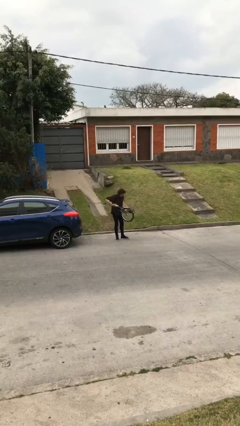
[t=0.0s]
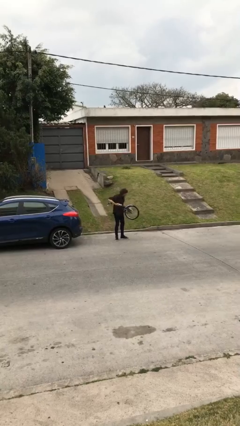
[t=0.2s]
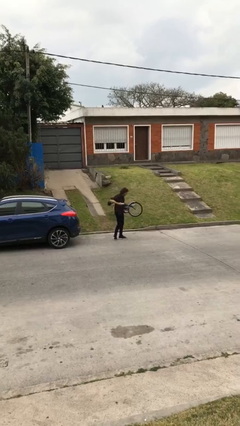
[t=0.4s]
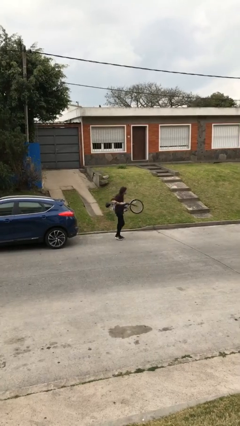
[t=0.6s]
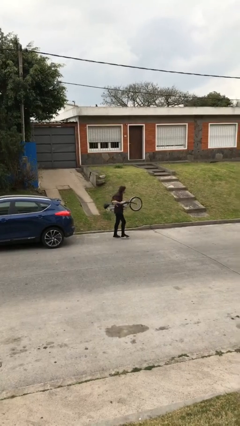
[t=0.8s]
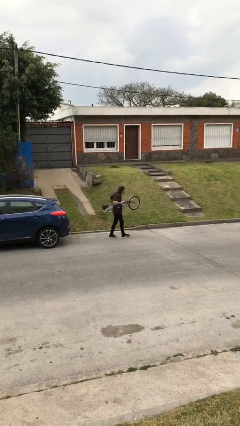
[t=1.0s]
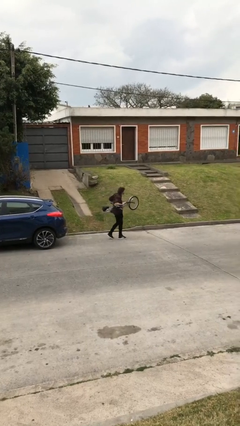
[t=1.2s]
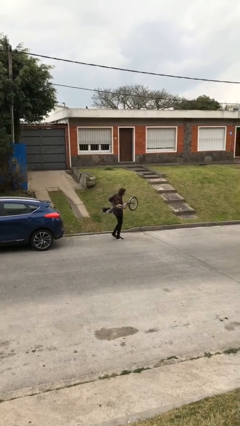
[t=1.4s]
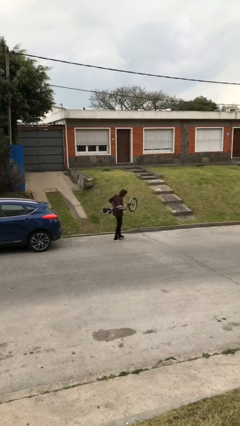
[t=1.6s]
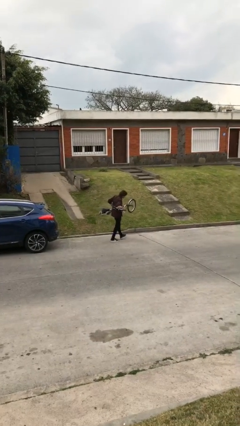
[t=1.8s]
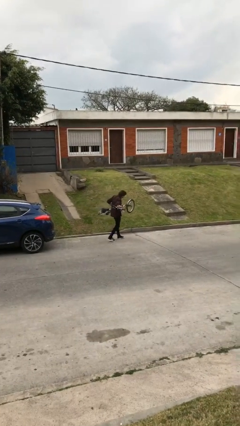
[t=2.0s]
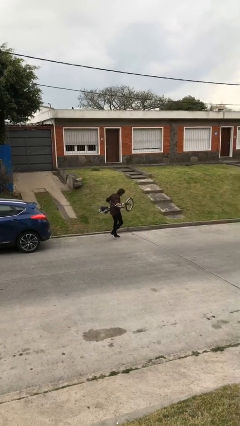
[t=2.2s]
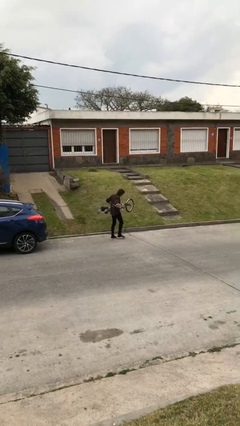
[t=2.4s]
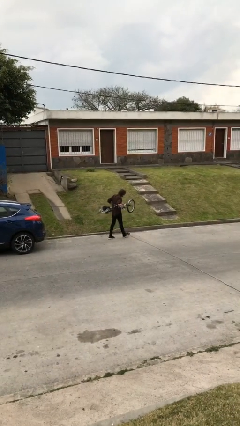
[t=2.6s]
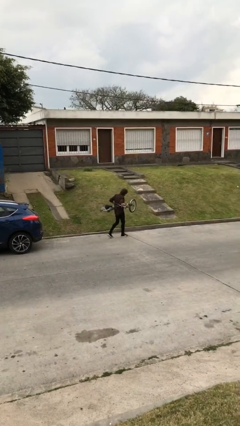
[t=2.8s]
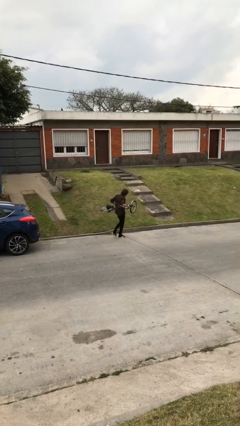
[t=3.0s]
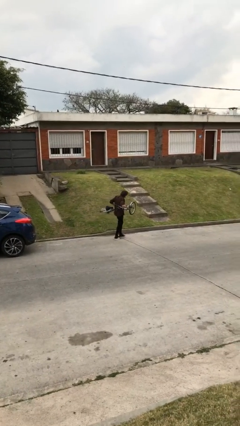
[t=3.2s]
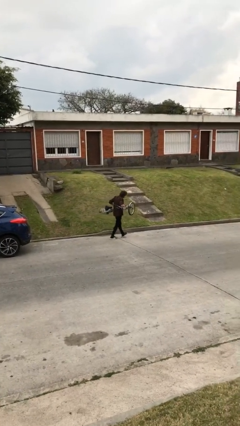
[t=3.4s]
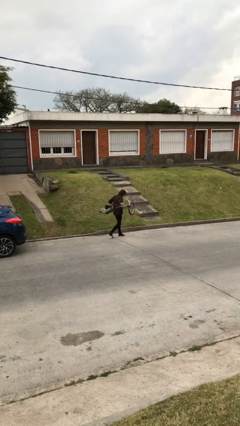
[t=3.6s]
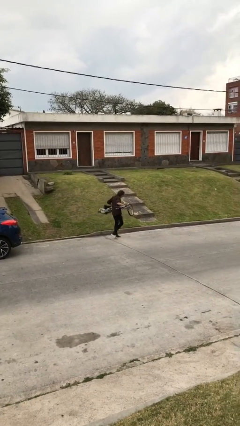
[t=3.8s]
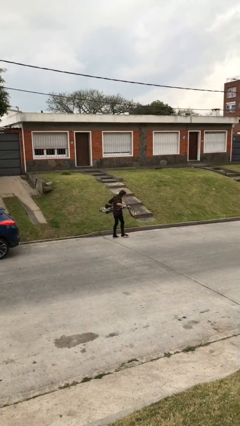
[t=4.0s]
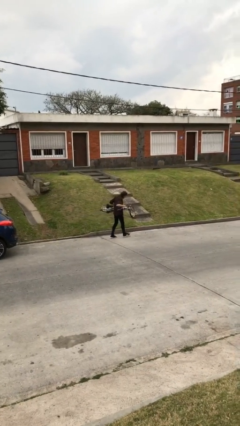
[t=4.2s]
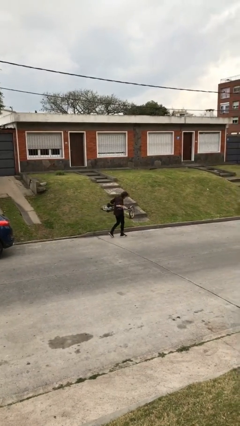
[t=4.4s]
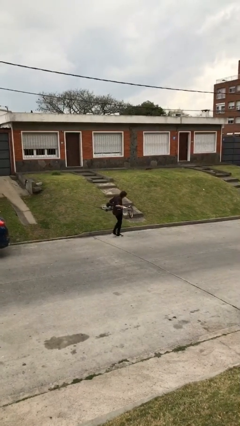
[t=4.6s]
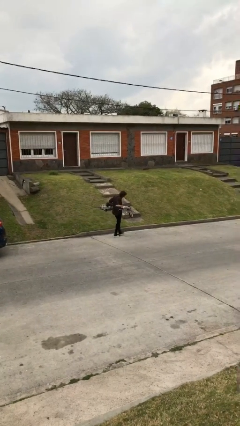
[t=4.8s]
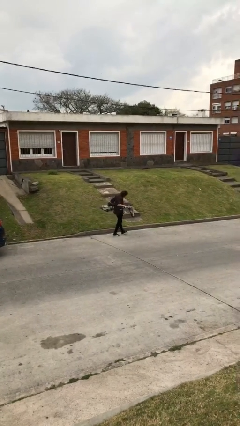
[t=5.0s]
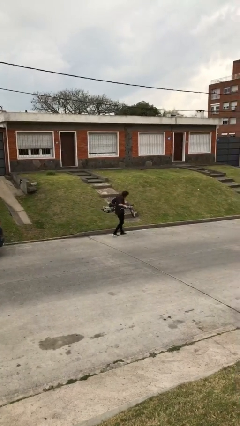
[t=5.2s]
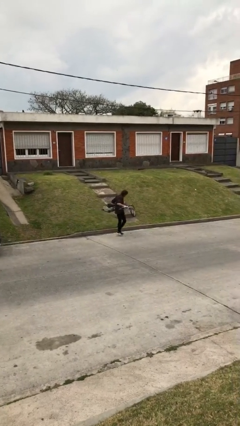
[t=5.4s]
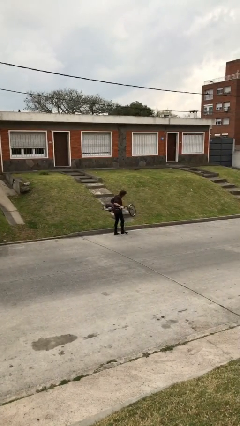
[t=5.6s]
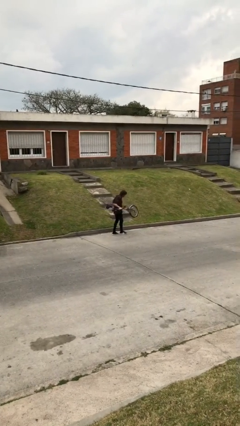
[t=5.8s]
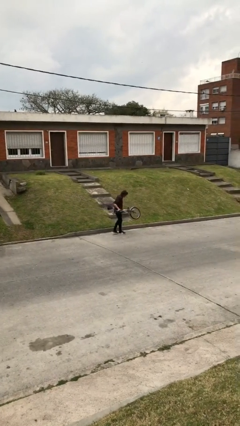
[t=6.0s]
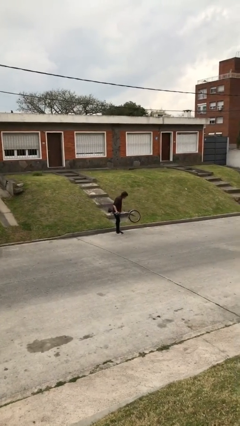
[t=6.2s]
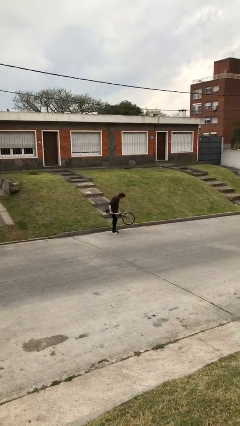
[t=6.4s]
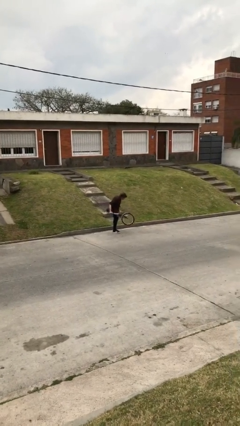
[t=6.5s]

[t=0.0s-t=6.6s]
person carries heavy object

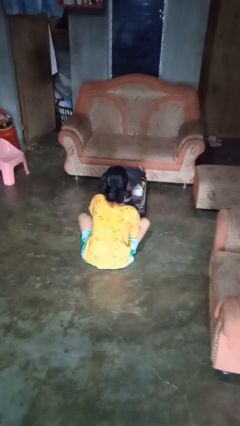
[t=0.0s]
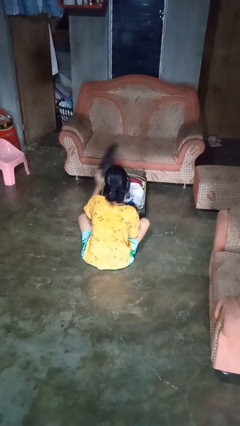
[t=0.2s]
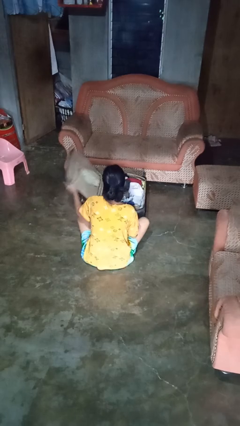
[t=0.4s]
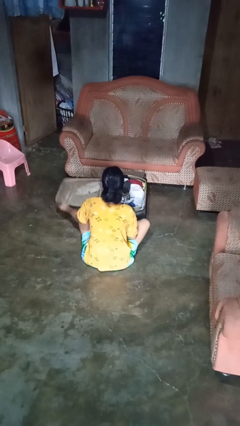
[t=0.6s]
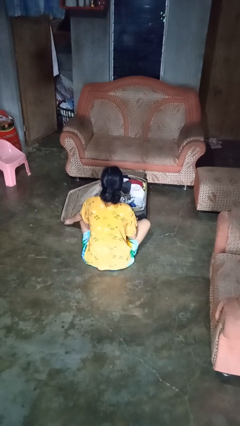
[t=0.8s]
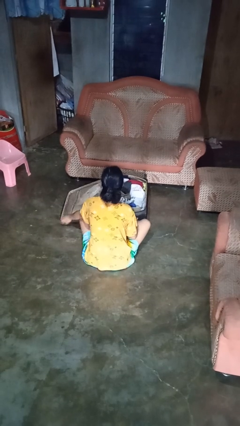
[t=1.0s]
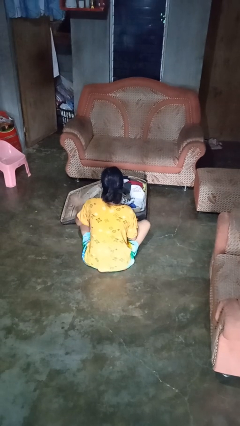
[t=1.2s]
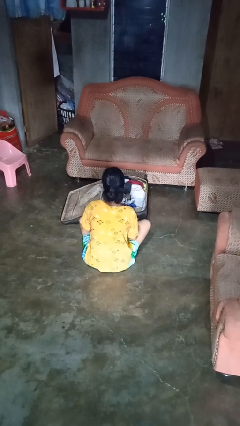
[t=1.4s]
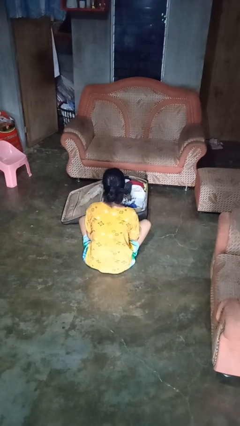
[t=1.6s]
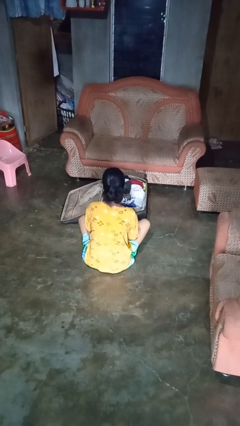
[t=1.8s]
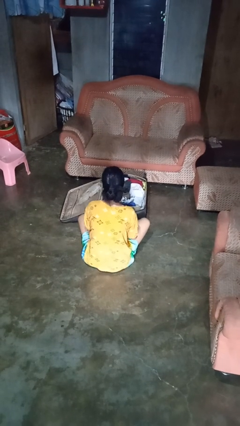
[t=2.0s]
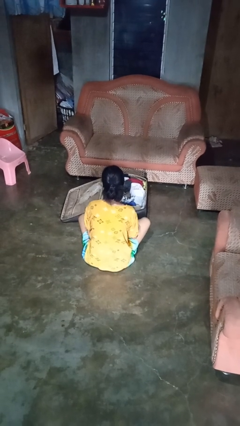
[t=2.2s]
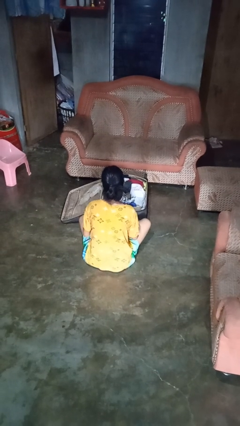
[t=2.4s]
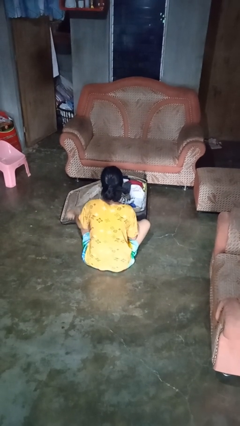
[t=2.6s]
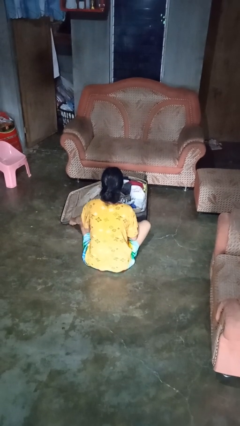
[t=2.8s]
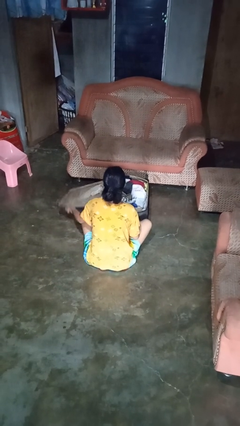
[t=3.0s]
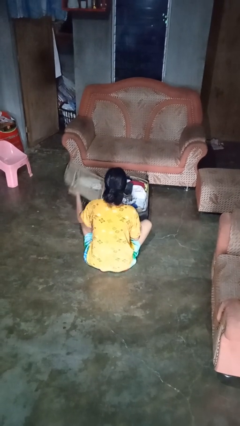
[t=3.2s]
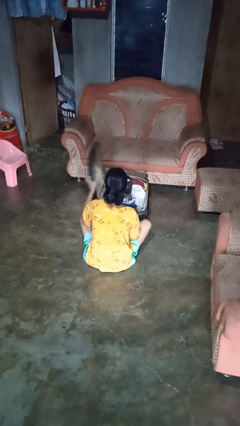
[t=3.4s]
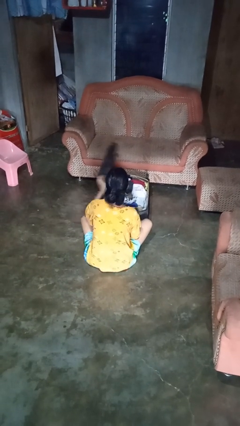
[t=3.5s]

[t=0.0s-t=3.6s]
person opens suitcase

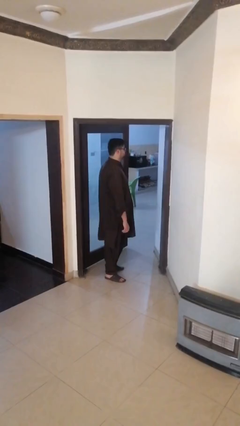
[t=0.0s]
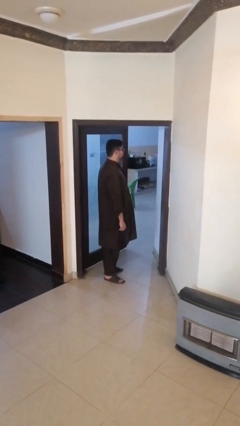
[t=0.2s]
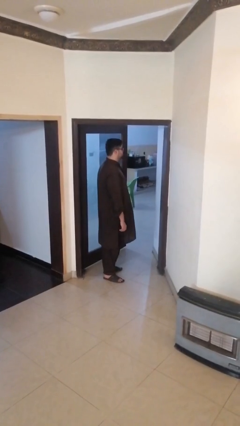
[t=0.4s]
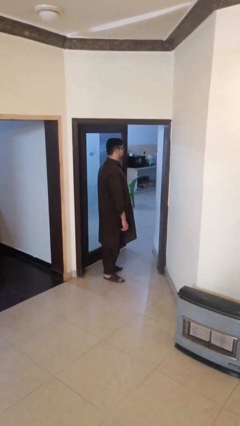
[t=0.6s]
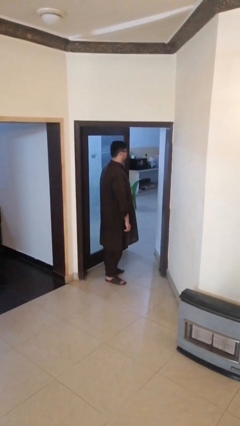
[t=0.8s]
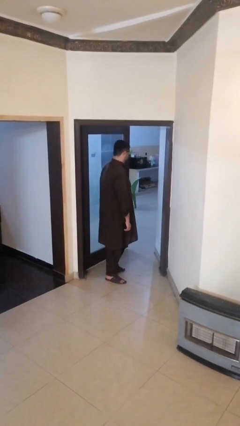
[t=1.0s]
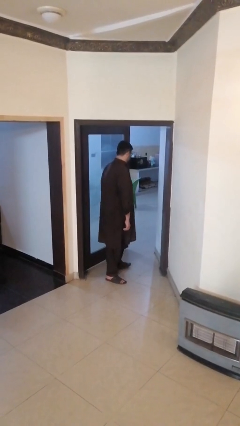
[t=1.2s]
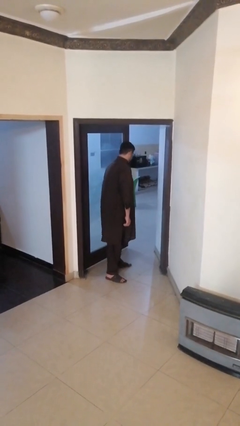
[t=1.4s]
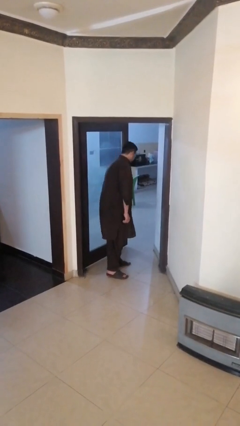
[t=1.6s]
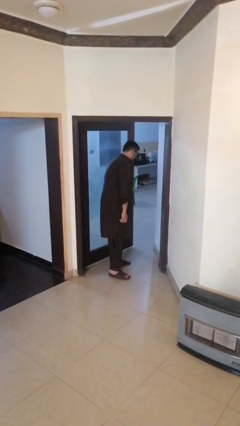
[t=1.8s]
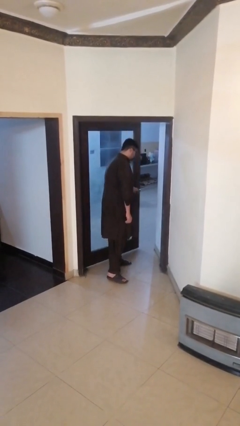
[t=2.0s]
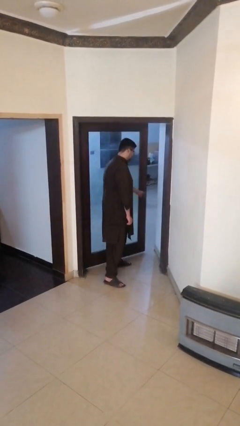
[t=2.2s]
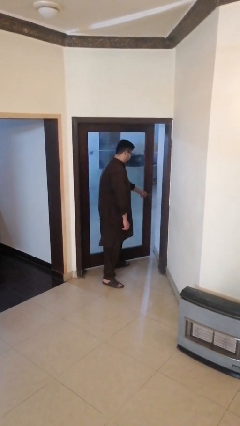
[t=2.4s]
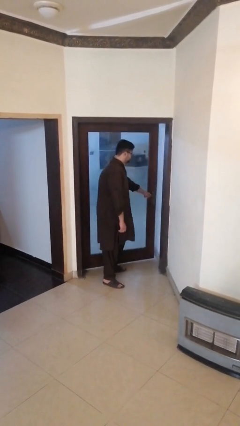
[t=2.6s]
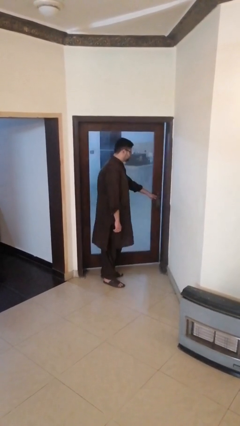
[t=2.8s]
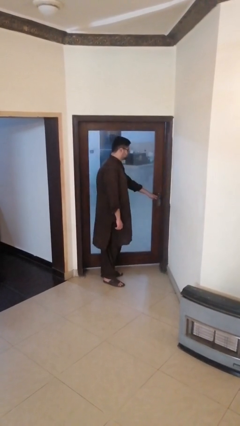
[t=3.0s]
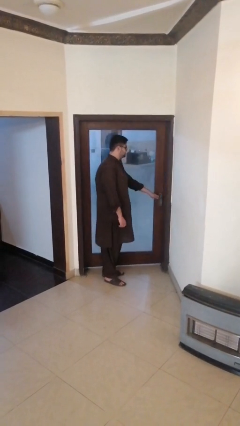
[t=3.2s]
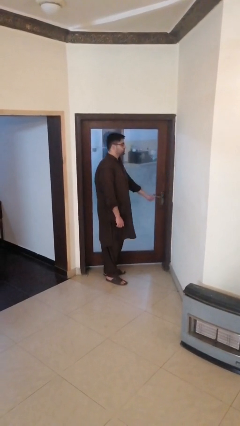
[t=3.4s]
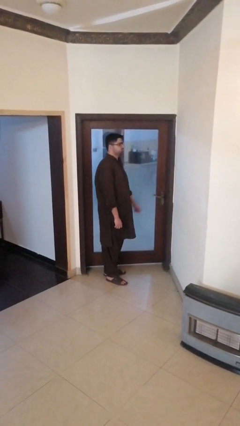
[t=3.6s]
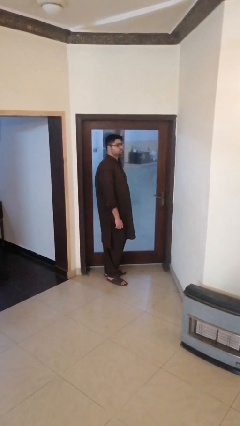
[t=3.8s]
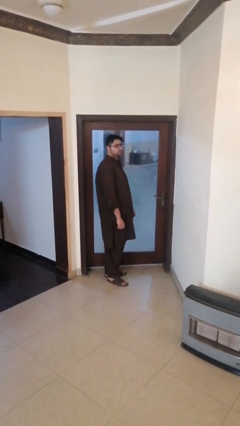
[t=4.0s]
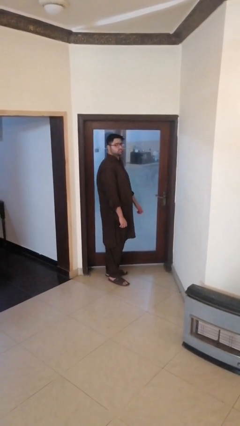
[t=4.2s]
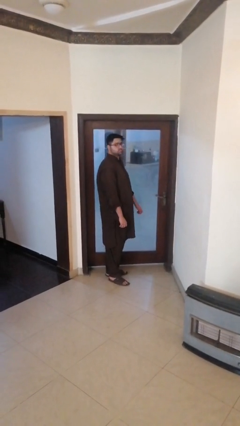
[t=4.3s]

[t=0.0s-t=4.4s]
person closes facility door

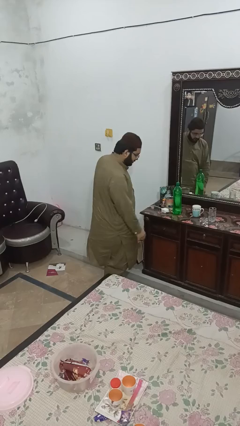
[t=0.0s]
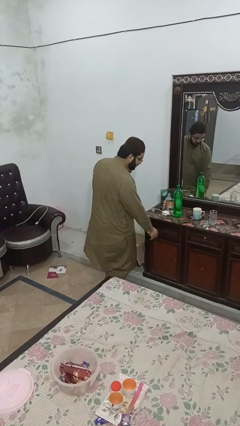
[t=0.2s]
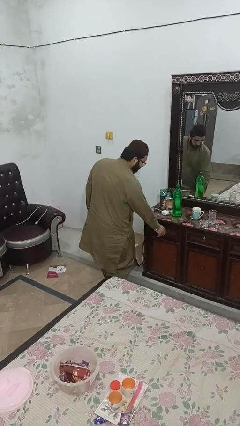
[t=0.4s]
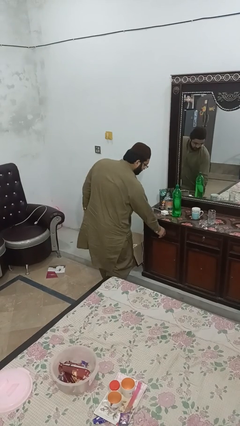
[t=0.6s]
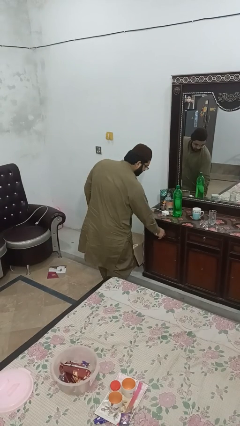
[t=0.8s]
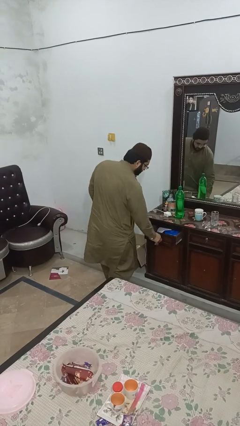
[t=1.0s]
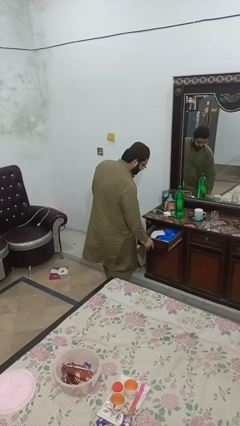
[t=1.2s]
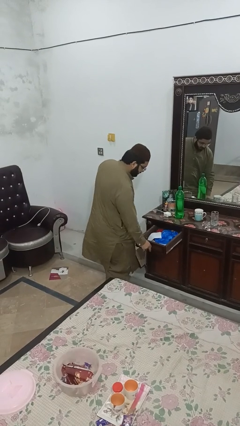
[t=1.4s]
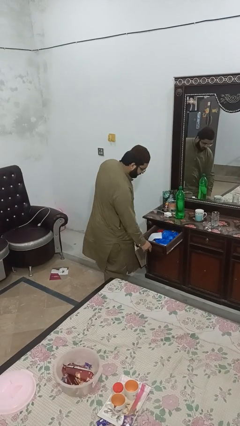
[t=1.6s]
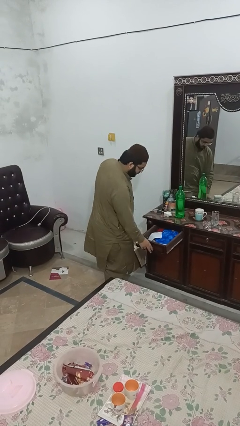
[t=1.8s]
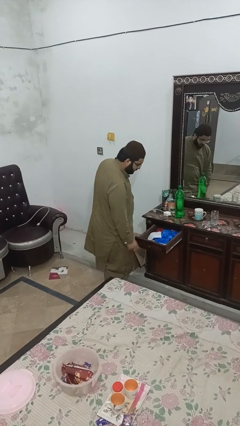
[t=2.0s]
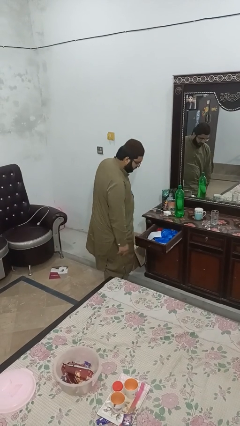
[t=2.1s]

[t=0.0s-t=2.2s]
person opens dresser drawer

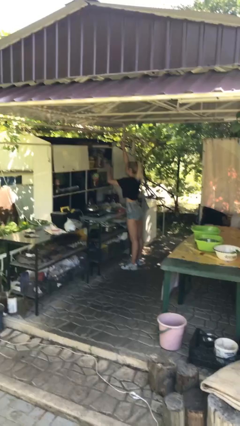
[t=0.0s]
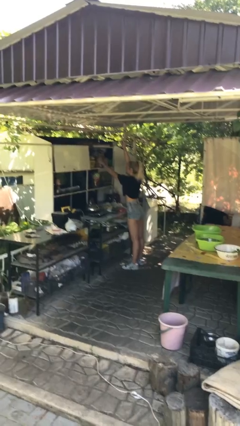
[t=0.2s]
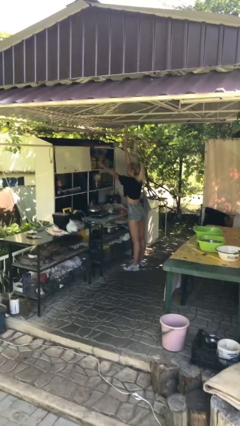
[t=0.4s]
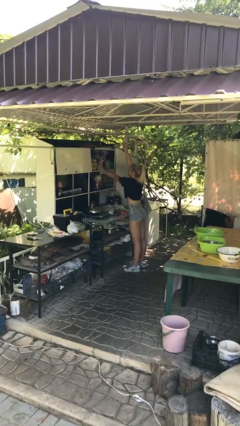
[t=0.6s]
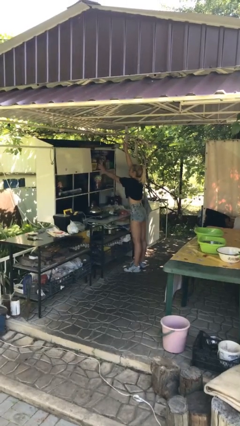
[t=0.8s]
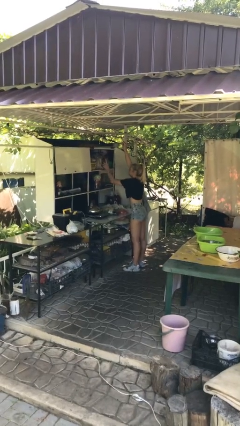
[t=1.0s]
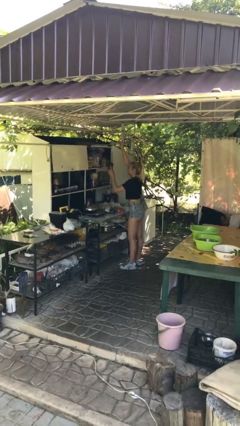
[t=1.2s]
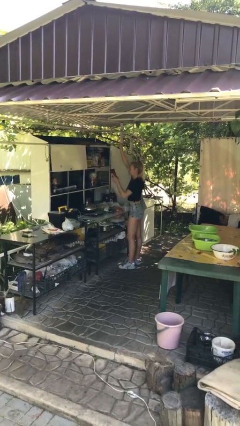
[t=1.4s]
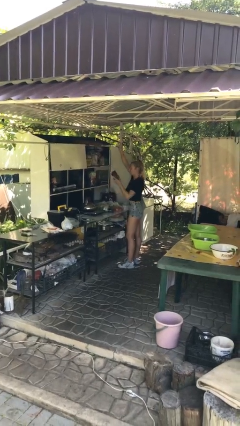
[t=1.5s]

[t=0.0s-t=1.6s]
person picks up object from shelf
